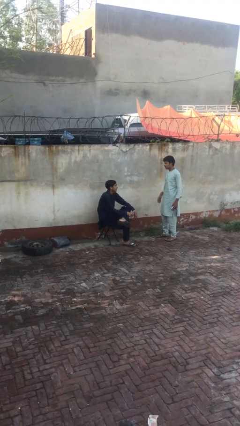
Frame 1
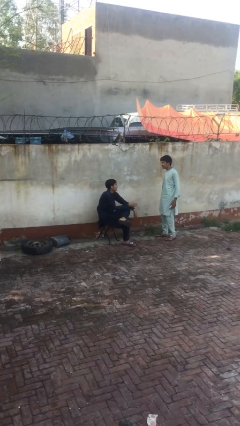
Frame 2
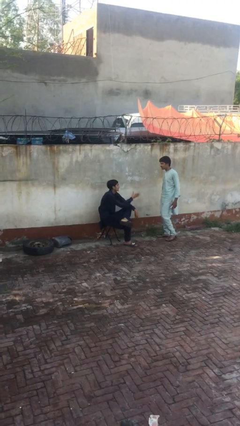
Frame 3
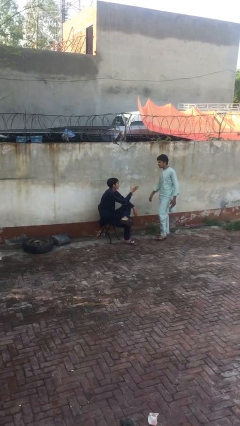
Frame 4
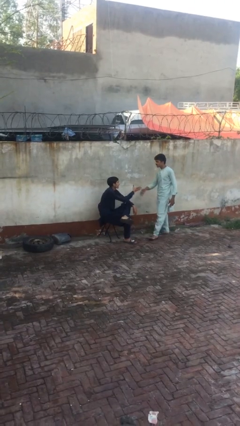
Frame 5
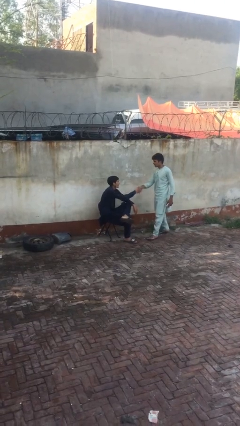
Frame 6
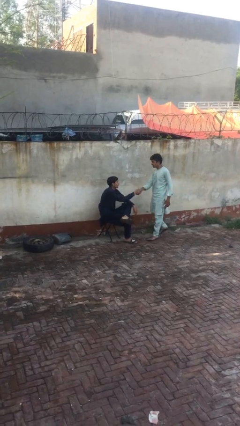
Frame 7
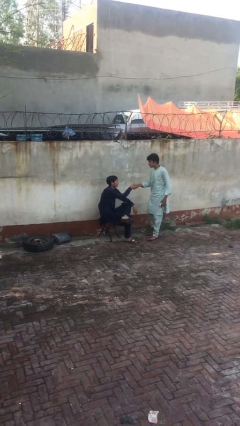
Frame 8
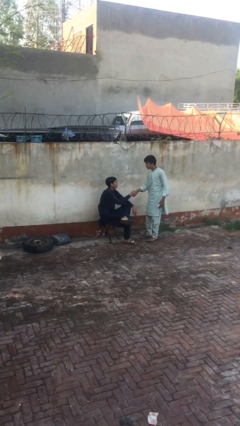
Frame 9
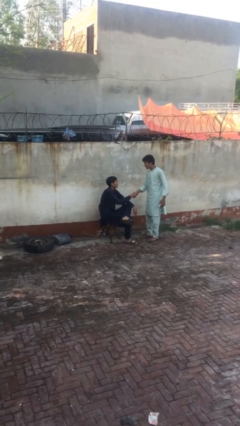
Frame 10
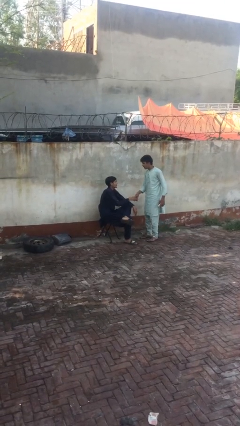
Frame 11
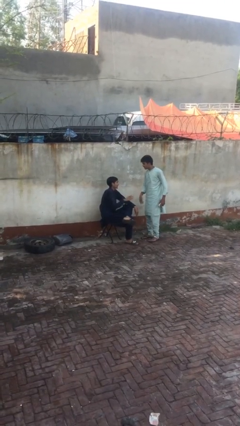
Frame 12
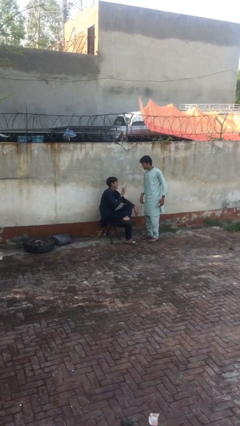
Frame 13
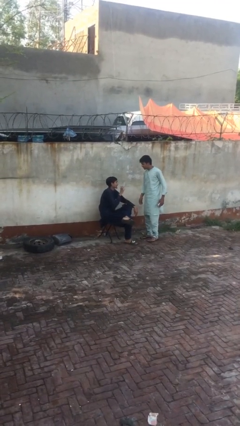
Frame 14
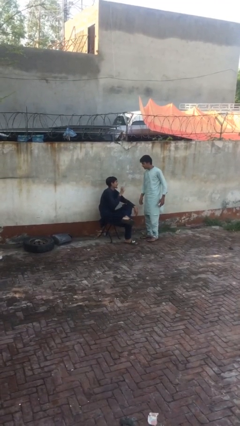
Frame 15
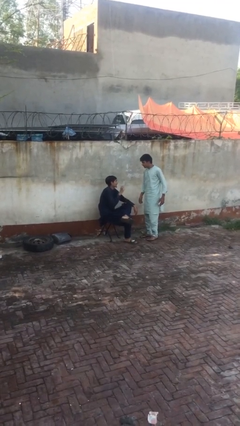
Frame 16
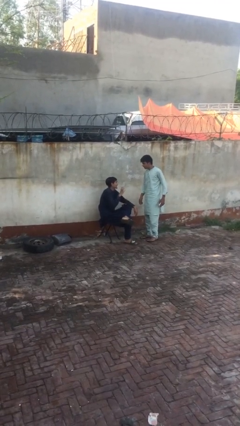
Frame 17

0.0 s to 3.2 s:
person shakes hand

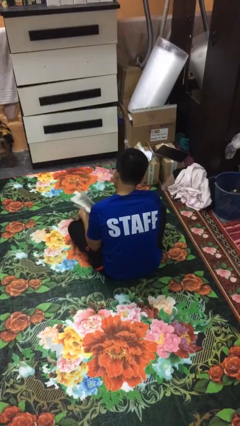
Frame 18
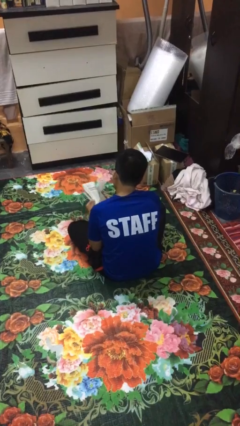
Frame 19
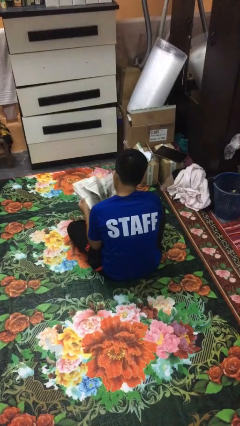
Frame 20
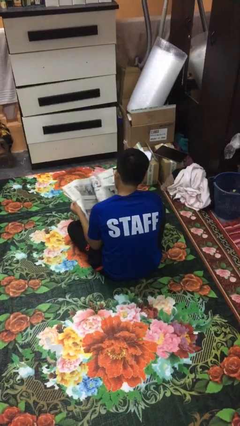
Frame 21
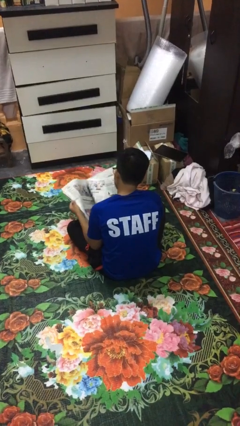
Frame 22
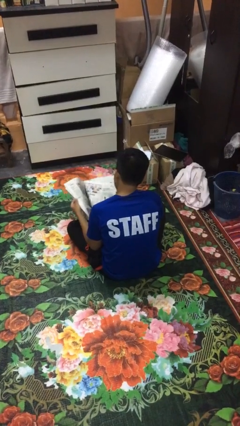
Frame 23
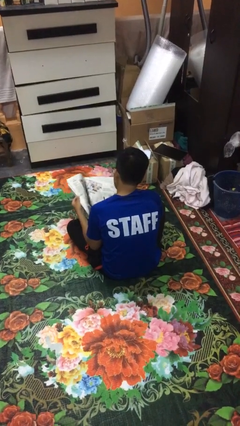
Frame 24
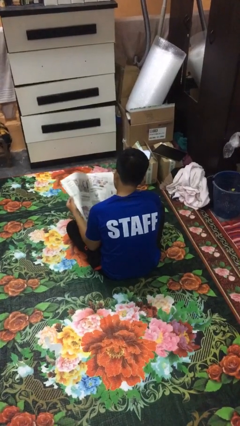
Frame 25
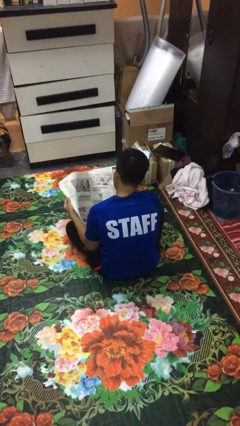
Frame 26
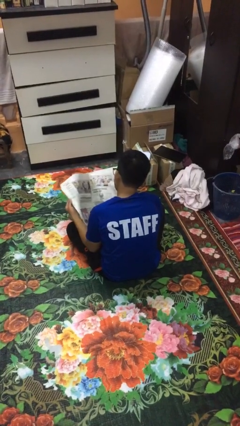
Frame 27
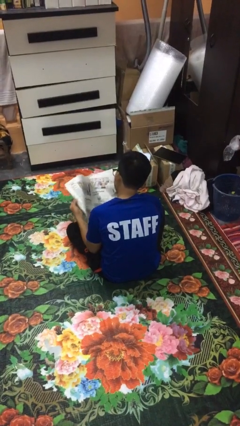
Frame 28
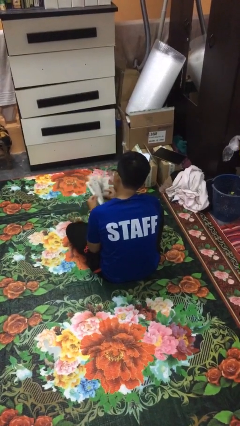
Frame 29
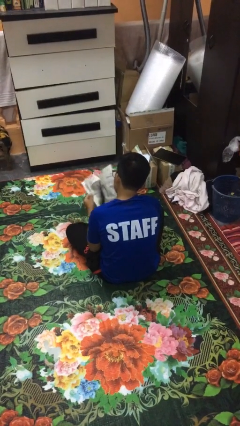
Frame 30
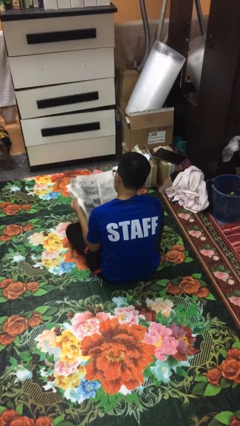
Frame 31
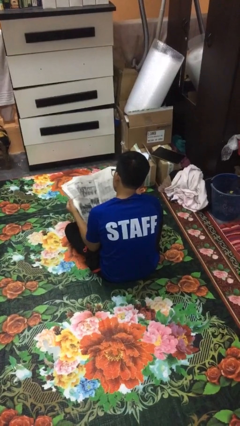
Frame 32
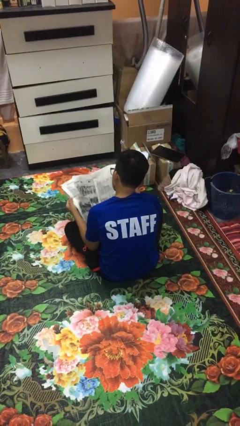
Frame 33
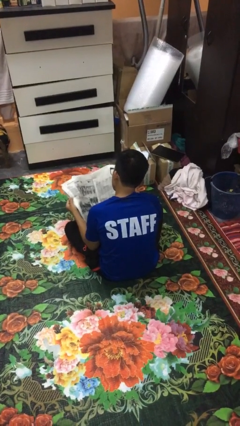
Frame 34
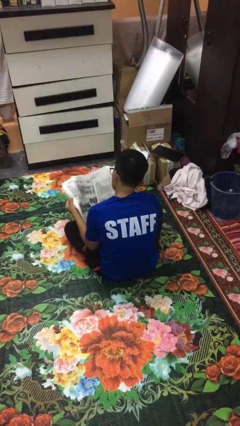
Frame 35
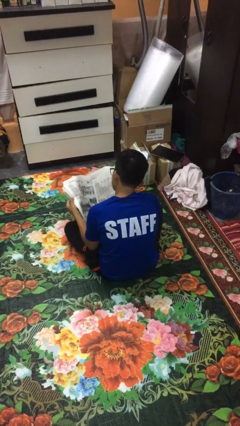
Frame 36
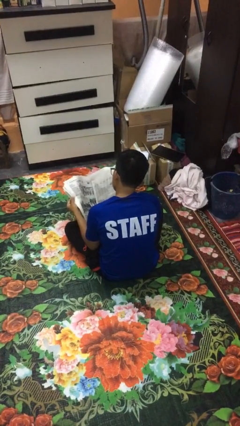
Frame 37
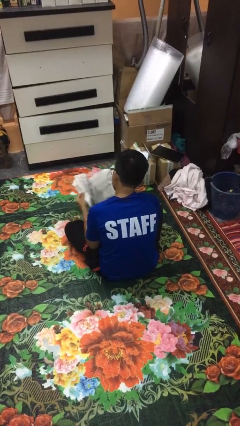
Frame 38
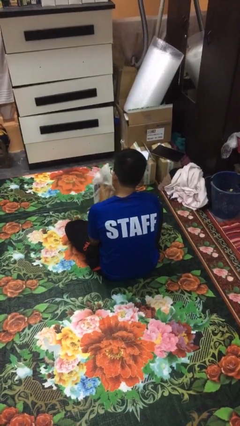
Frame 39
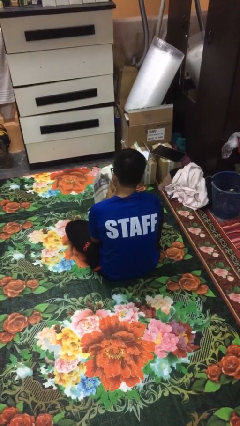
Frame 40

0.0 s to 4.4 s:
person reads newspaper

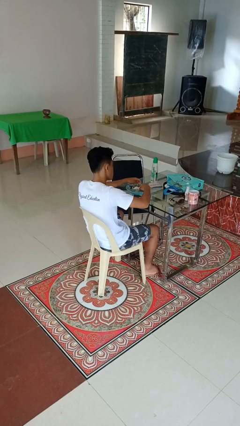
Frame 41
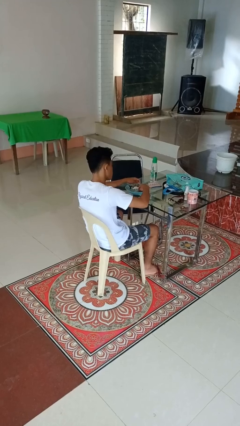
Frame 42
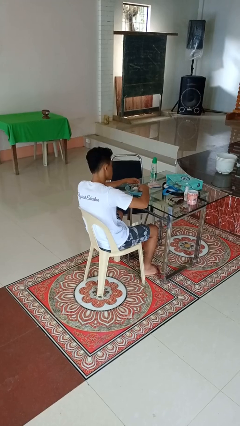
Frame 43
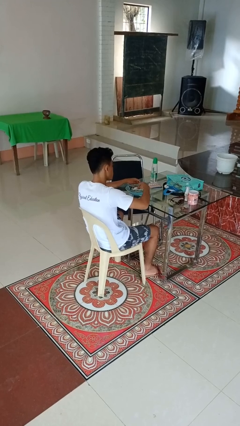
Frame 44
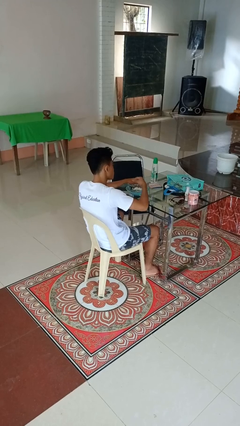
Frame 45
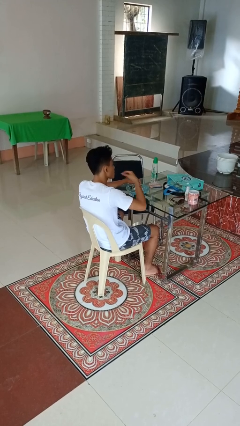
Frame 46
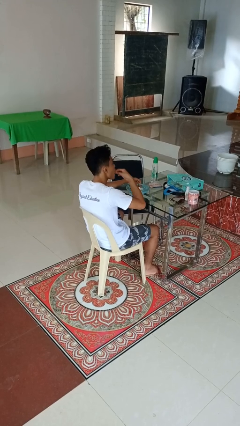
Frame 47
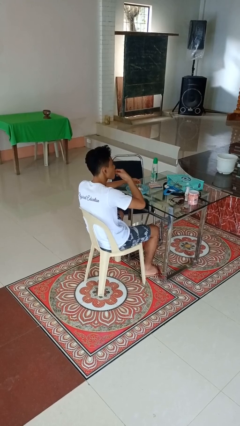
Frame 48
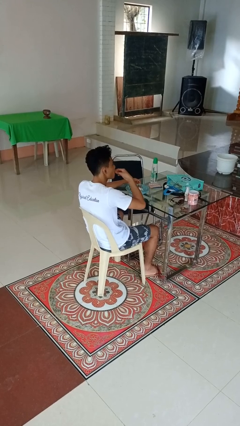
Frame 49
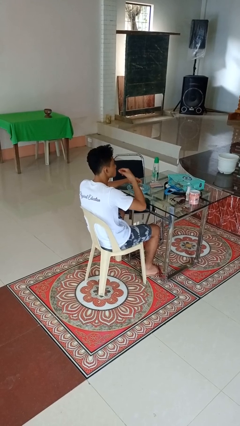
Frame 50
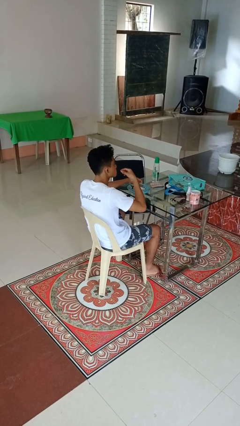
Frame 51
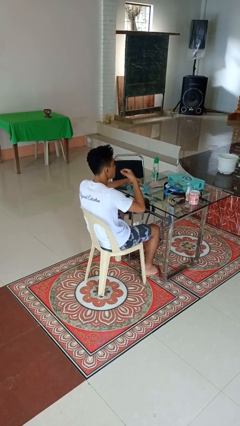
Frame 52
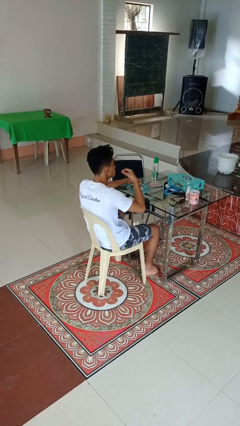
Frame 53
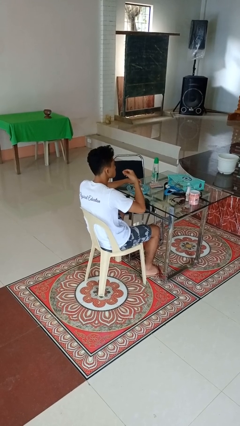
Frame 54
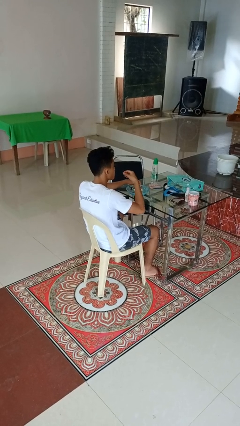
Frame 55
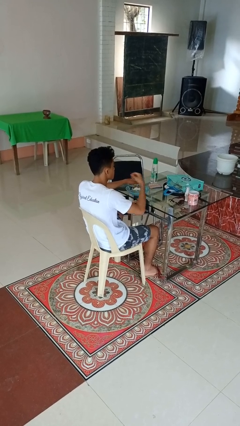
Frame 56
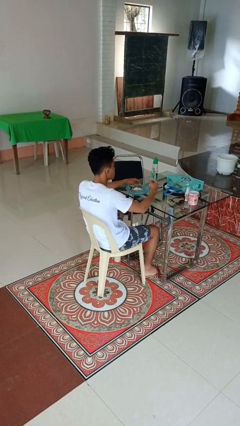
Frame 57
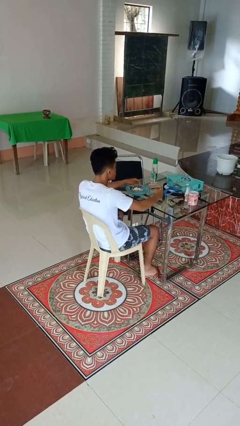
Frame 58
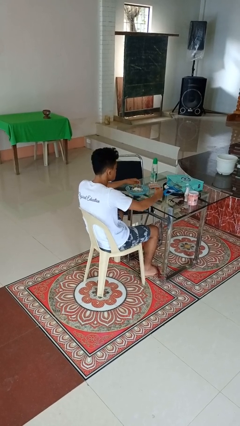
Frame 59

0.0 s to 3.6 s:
person eats with hands

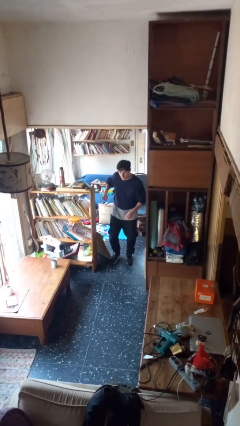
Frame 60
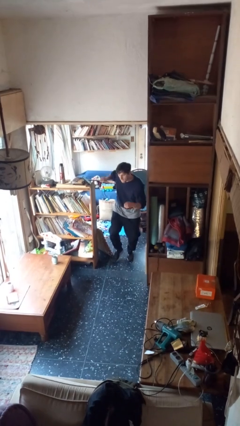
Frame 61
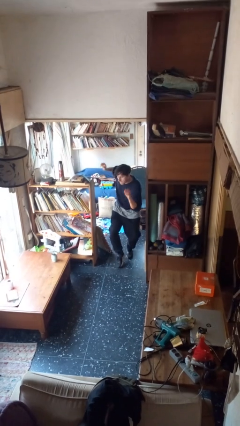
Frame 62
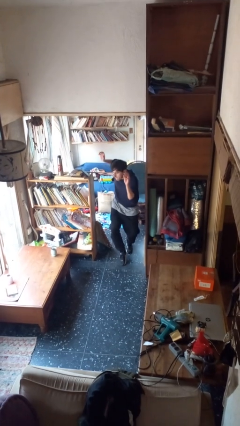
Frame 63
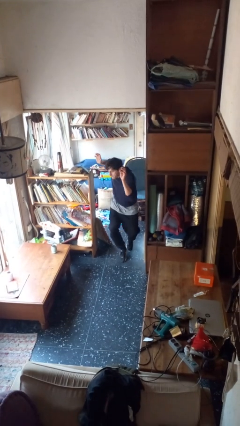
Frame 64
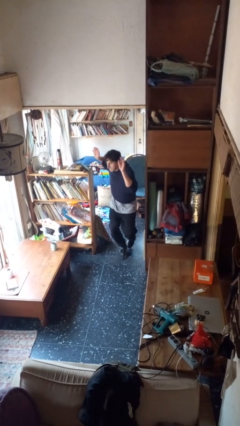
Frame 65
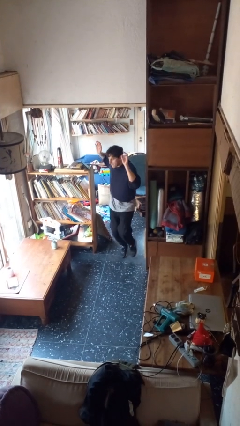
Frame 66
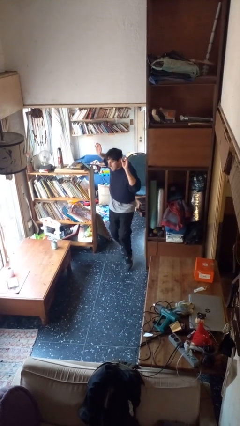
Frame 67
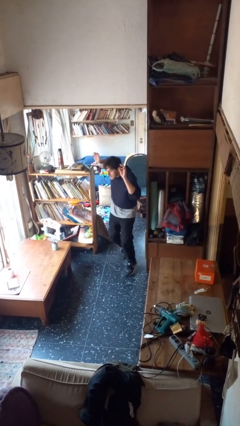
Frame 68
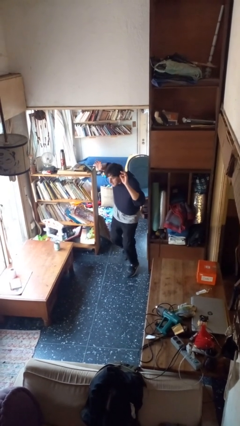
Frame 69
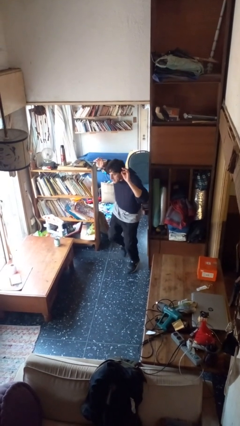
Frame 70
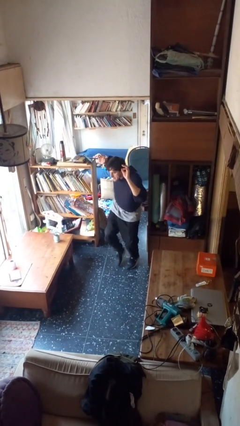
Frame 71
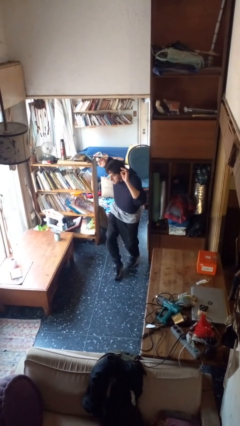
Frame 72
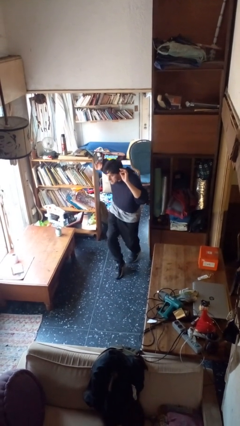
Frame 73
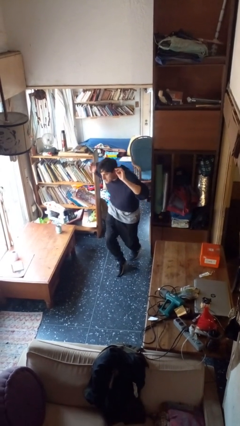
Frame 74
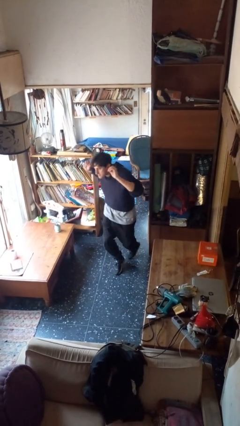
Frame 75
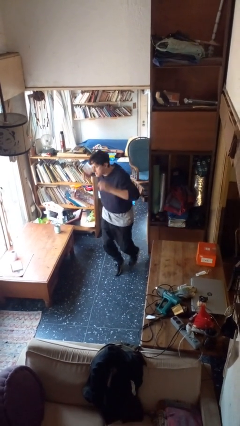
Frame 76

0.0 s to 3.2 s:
person walks tiptoe

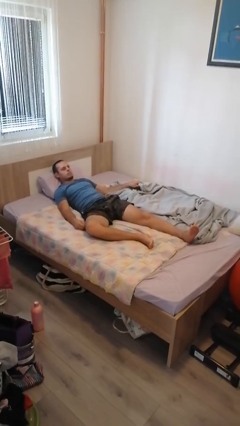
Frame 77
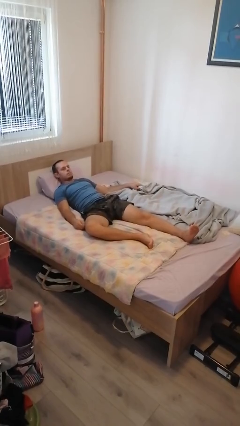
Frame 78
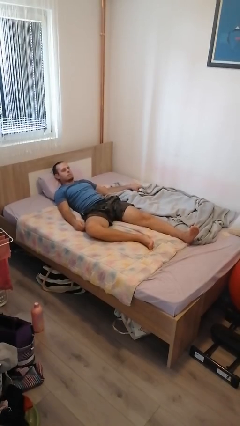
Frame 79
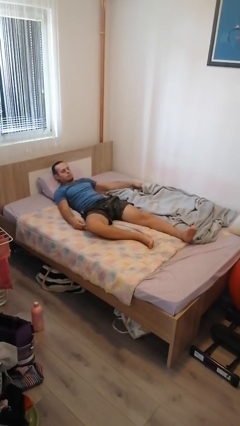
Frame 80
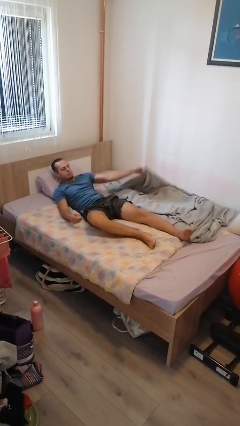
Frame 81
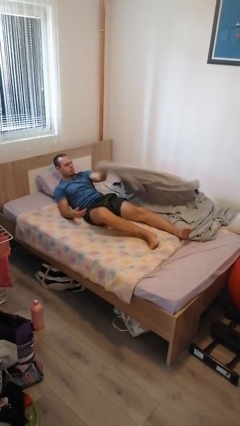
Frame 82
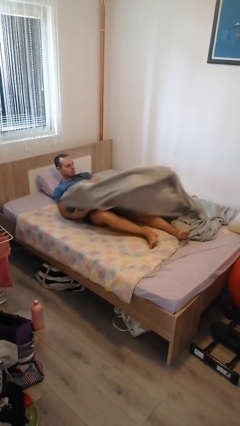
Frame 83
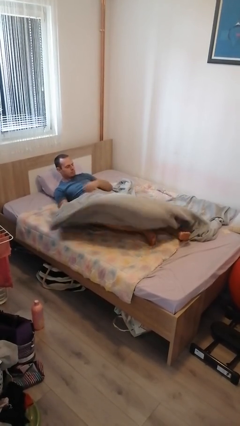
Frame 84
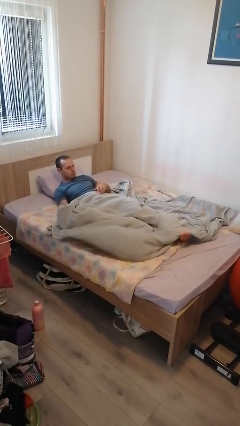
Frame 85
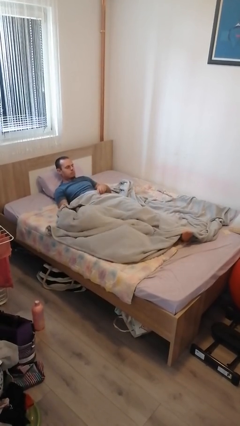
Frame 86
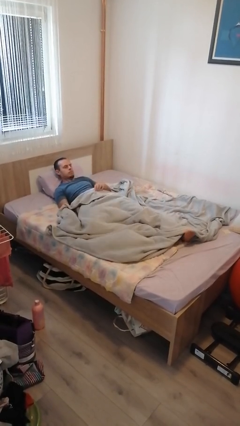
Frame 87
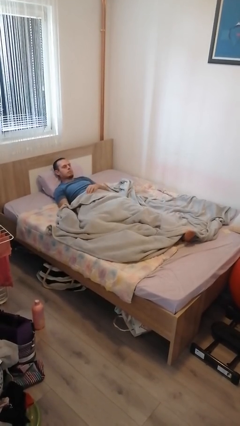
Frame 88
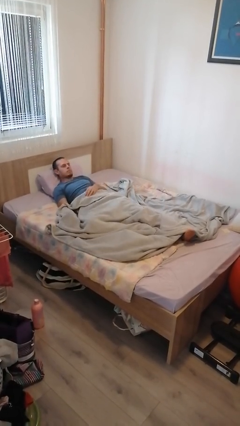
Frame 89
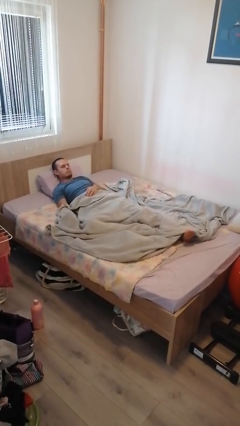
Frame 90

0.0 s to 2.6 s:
person covers with bedsheets

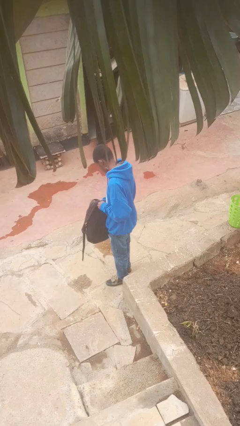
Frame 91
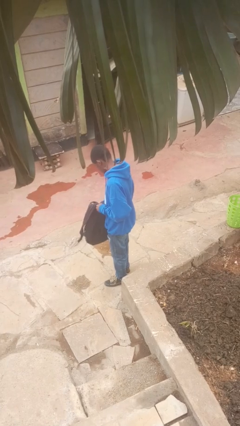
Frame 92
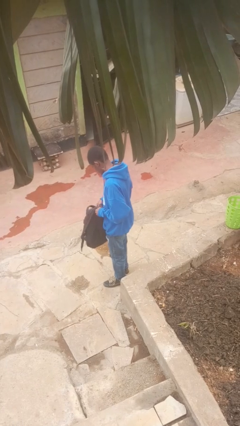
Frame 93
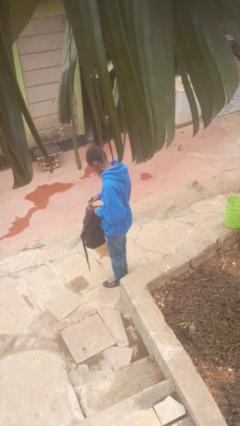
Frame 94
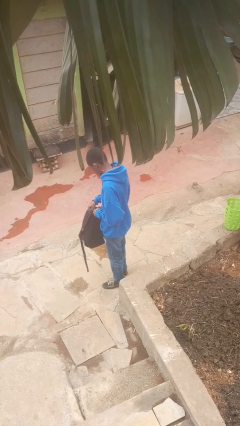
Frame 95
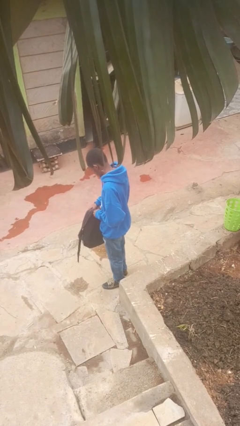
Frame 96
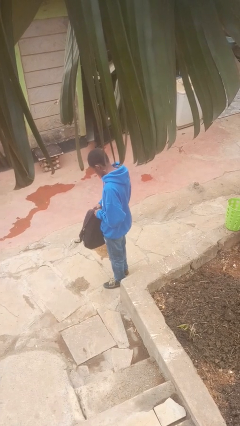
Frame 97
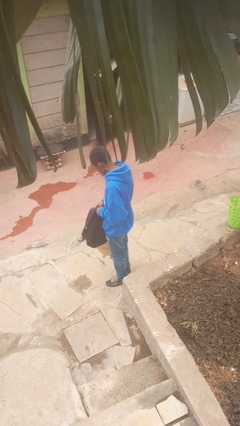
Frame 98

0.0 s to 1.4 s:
person puts object into backpack
